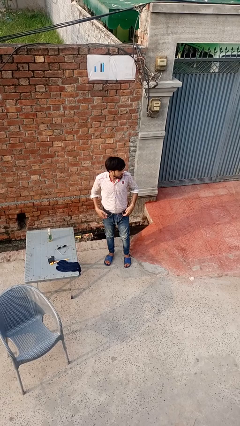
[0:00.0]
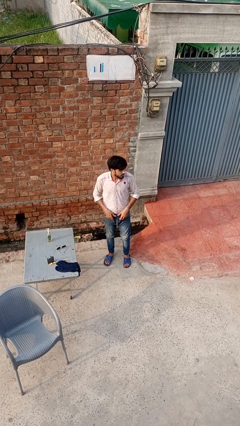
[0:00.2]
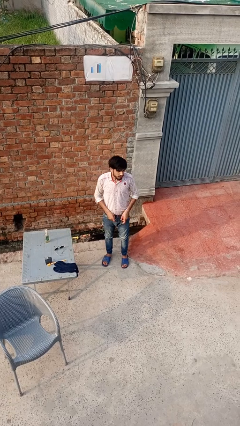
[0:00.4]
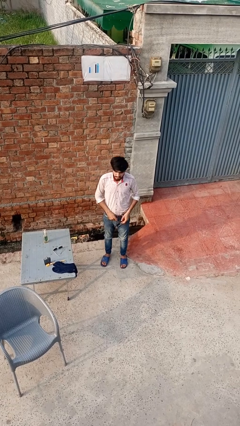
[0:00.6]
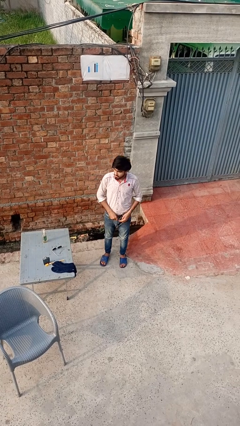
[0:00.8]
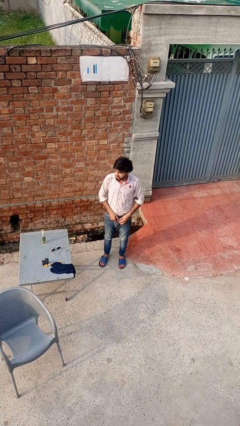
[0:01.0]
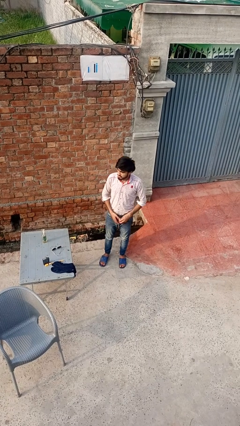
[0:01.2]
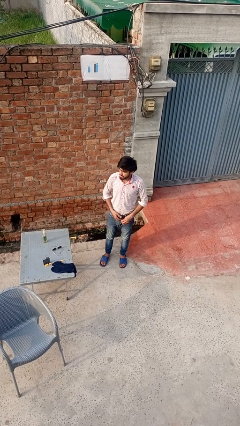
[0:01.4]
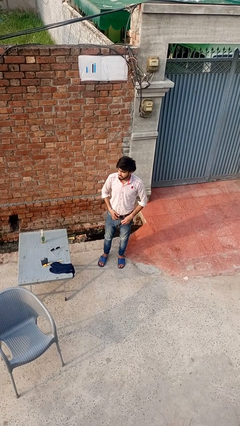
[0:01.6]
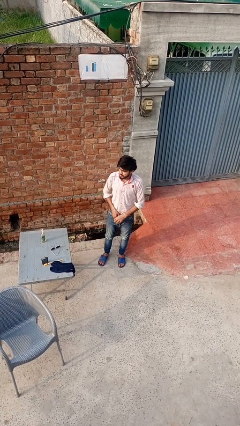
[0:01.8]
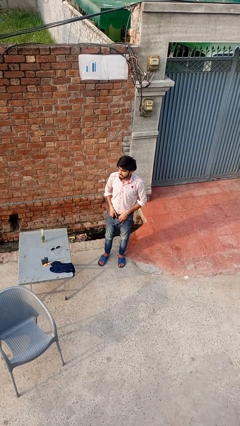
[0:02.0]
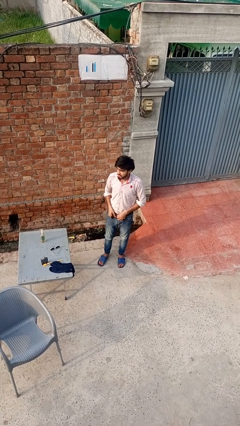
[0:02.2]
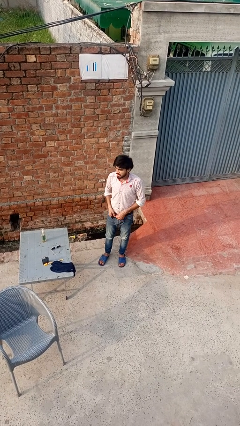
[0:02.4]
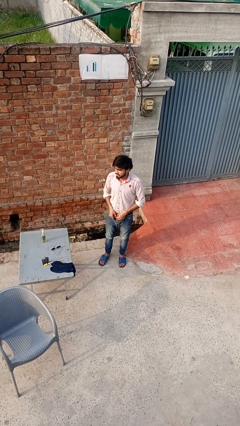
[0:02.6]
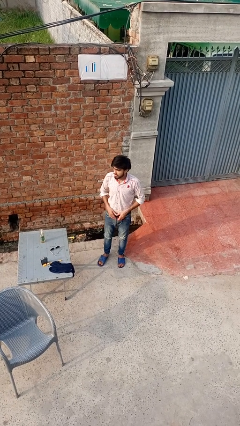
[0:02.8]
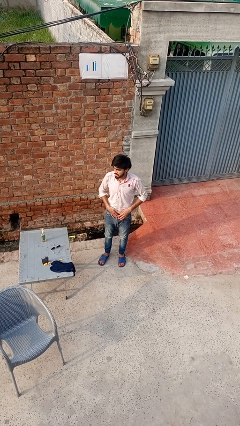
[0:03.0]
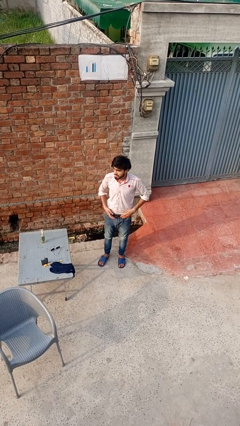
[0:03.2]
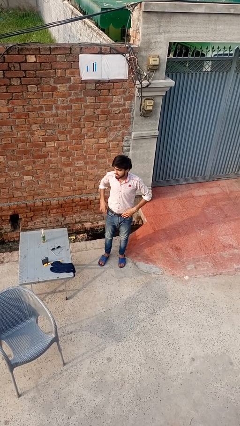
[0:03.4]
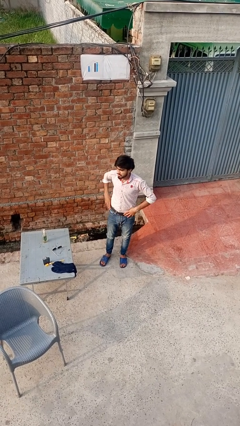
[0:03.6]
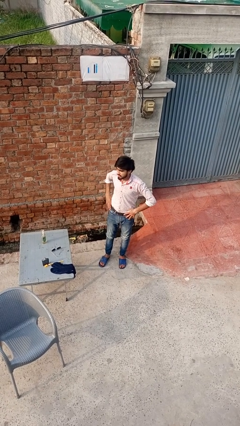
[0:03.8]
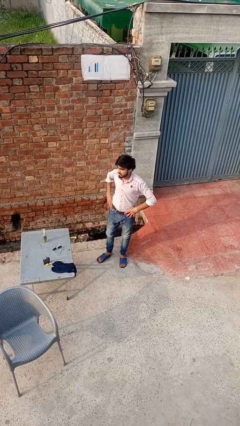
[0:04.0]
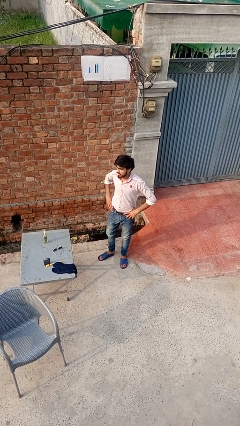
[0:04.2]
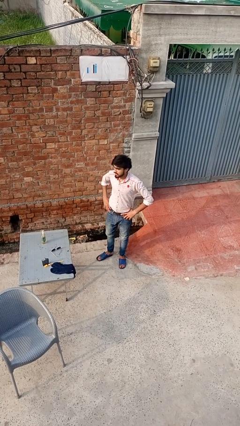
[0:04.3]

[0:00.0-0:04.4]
person puts on belt

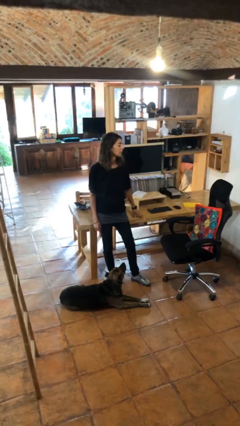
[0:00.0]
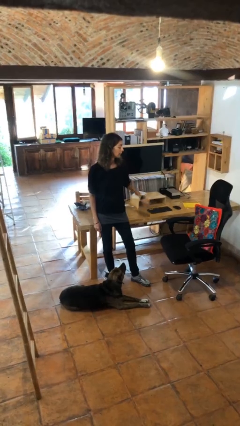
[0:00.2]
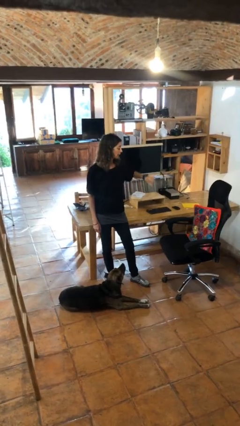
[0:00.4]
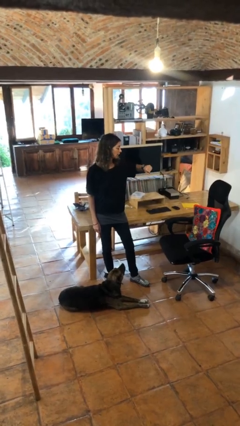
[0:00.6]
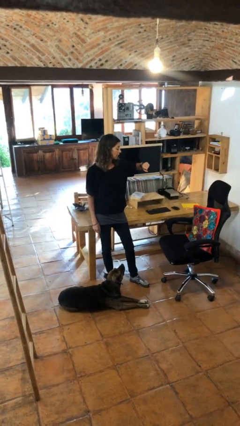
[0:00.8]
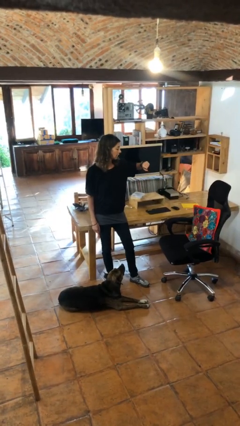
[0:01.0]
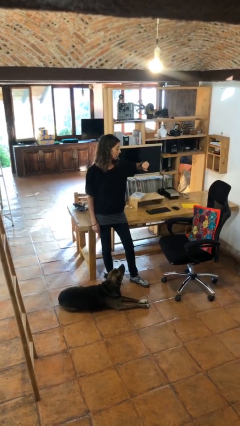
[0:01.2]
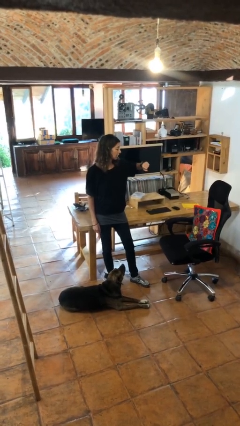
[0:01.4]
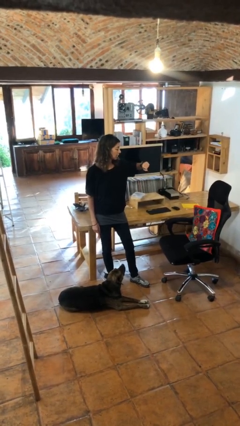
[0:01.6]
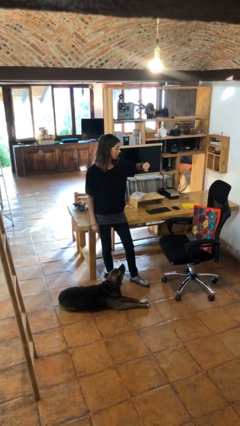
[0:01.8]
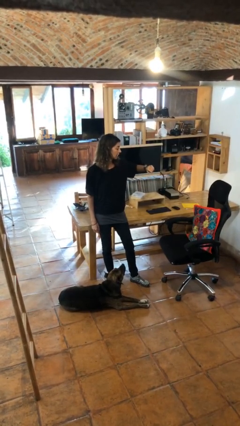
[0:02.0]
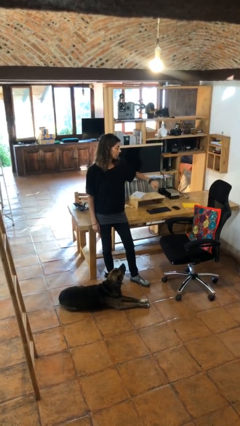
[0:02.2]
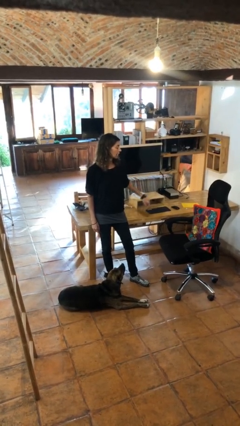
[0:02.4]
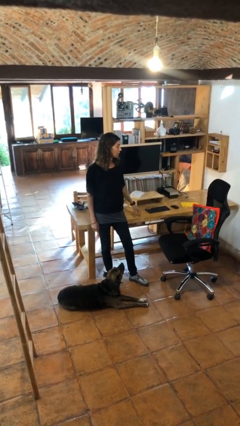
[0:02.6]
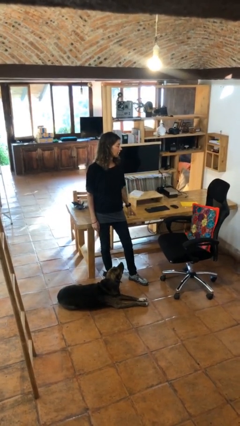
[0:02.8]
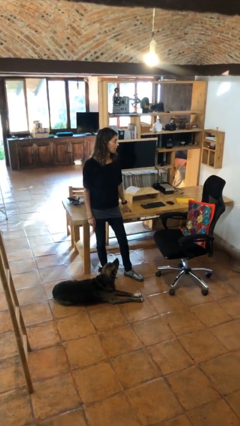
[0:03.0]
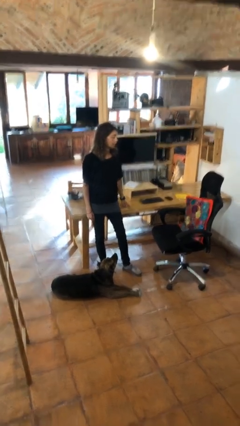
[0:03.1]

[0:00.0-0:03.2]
person looks at wristwatch

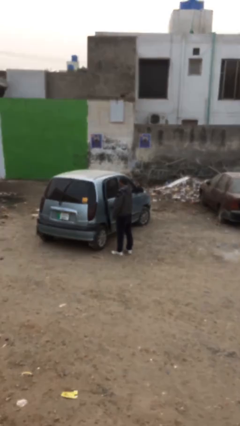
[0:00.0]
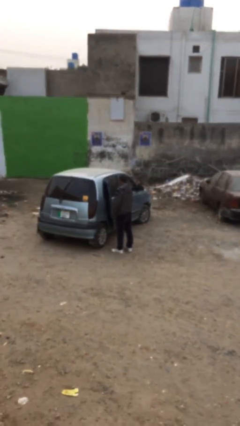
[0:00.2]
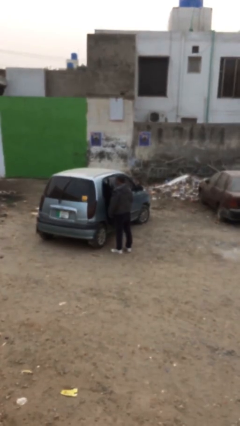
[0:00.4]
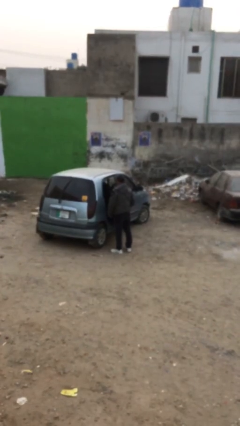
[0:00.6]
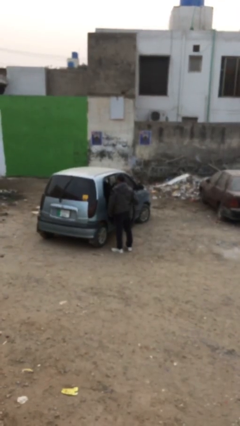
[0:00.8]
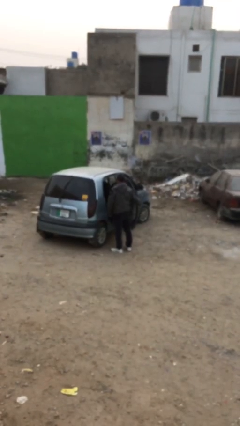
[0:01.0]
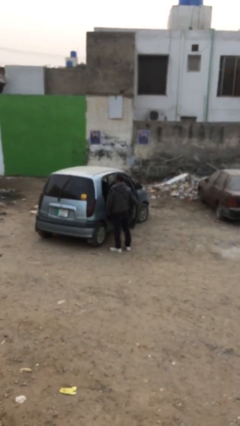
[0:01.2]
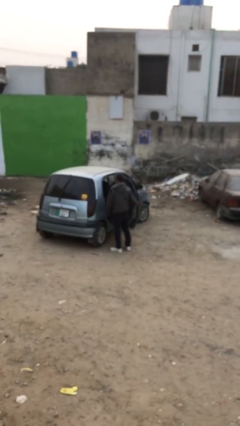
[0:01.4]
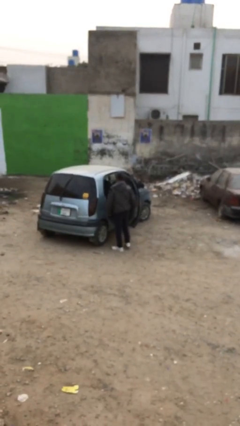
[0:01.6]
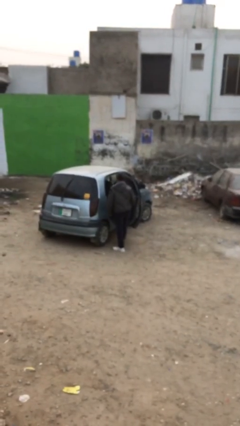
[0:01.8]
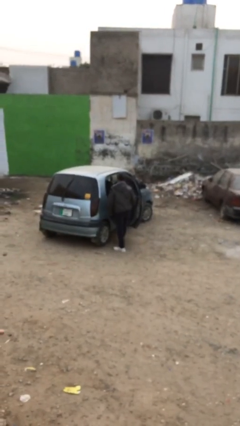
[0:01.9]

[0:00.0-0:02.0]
person opens car door

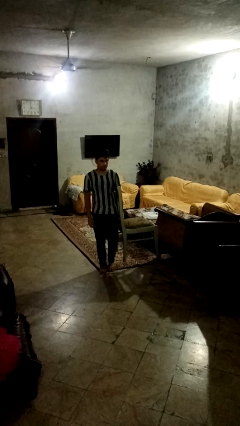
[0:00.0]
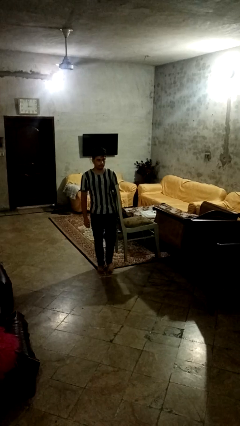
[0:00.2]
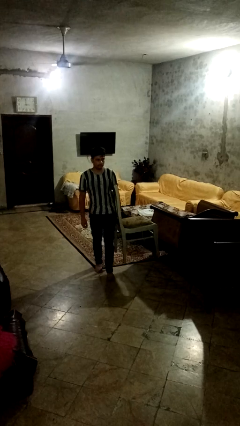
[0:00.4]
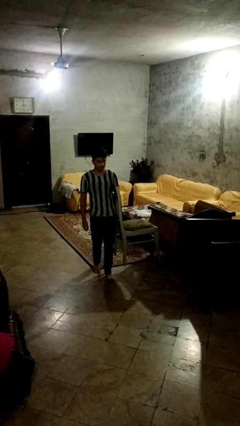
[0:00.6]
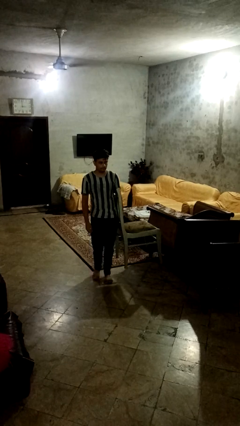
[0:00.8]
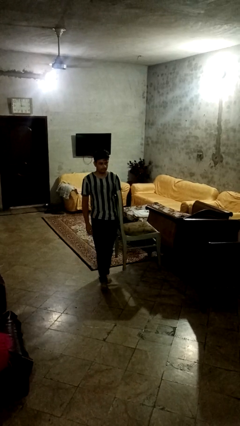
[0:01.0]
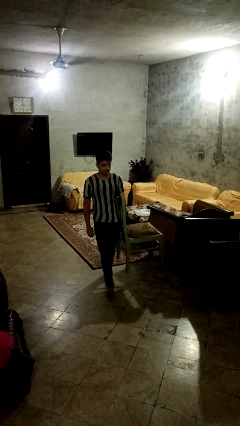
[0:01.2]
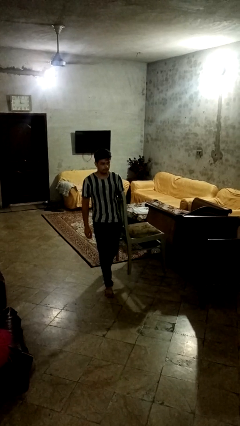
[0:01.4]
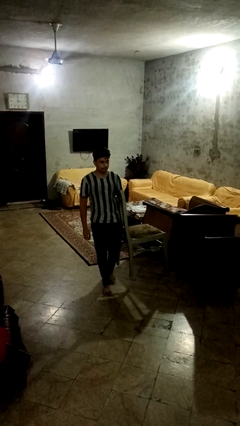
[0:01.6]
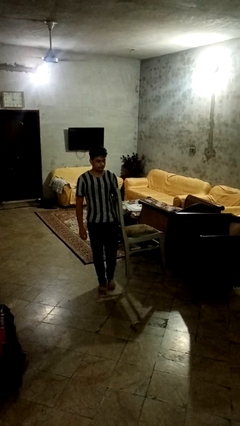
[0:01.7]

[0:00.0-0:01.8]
person carries furniture

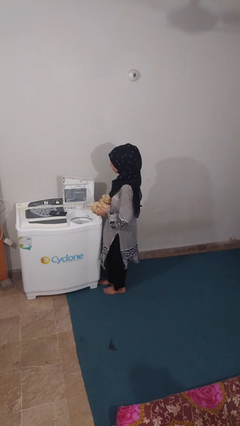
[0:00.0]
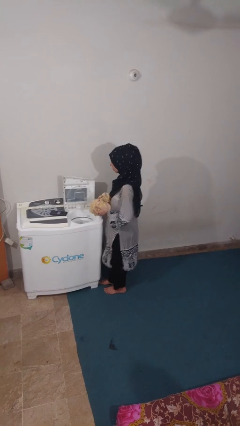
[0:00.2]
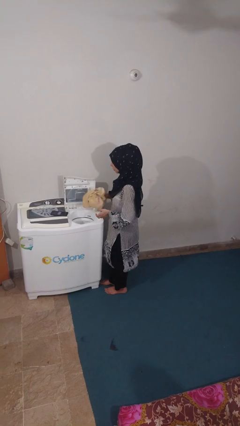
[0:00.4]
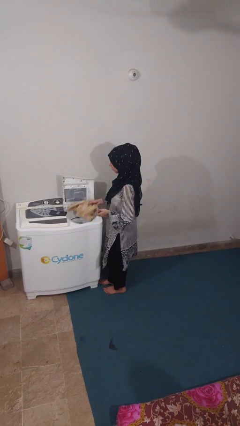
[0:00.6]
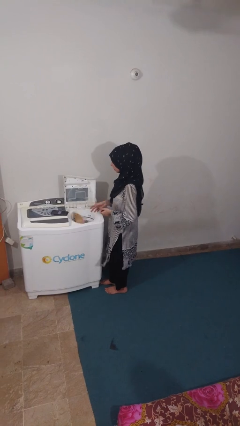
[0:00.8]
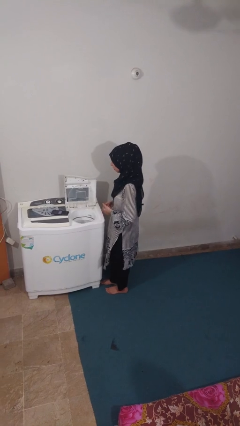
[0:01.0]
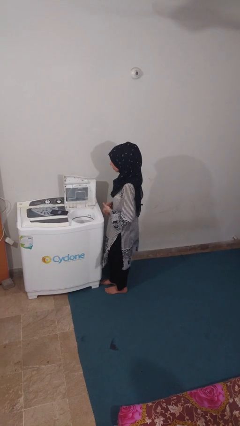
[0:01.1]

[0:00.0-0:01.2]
person loads dryer

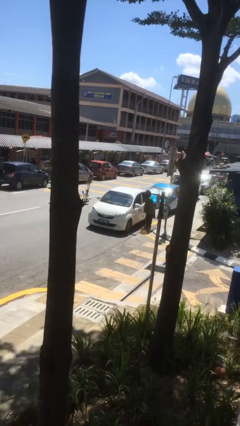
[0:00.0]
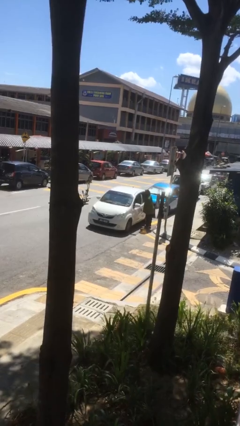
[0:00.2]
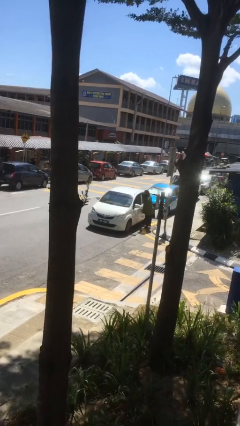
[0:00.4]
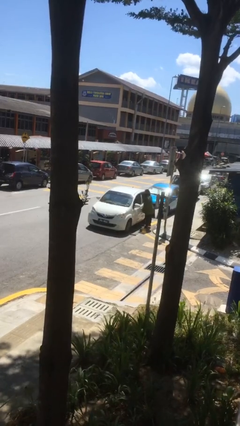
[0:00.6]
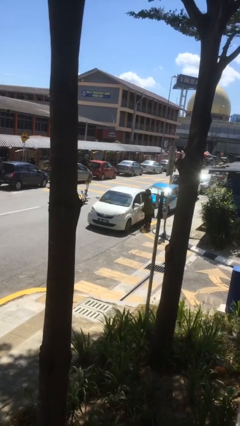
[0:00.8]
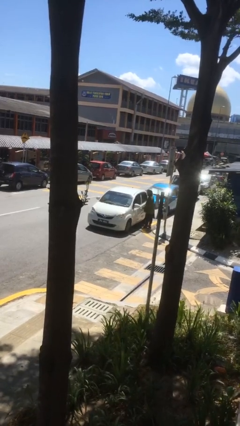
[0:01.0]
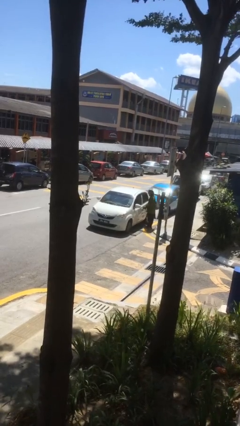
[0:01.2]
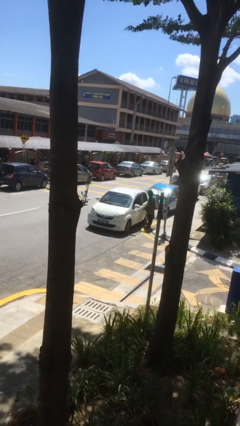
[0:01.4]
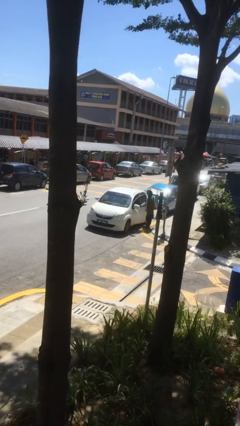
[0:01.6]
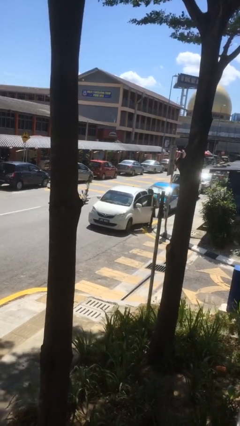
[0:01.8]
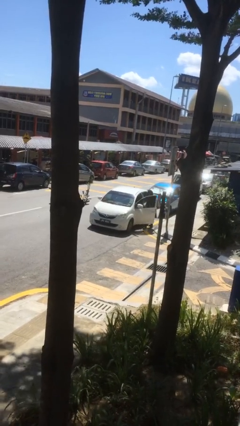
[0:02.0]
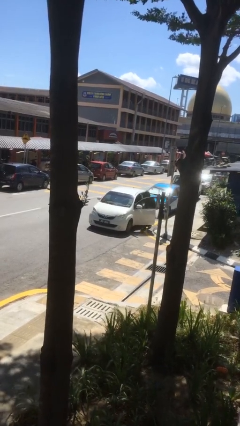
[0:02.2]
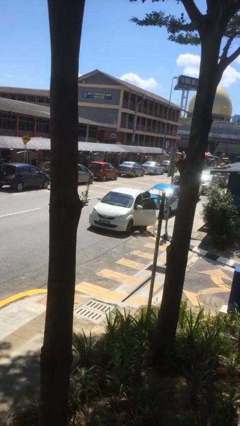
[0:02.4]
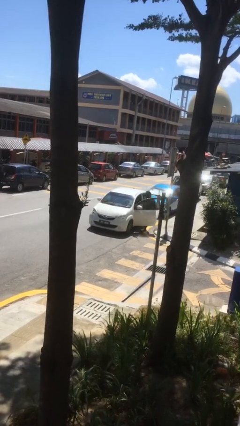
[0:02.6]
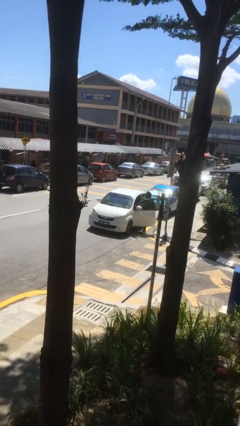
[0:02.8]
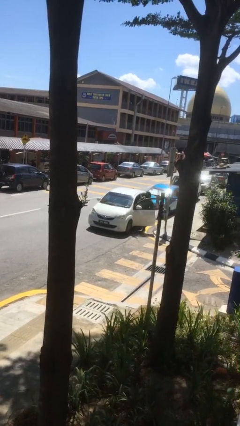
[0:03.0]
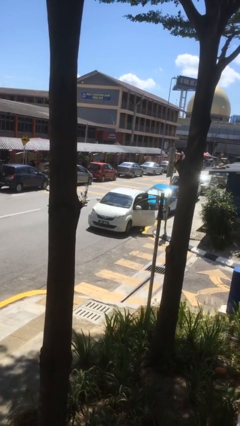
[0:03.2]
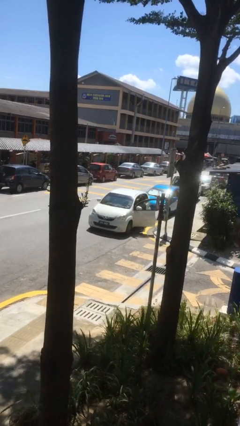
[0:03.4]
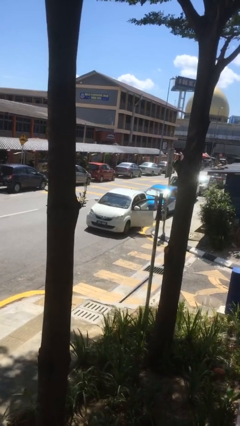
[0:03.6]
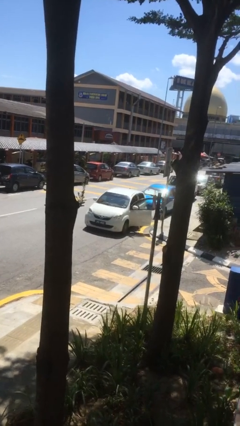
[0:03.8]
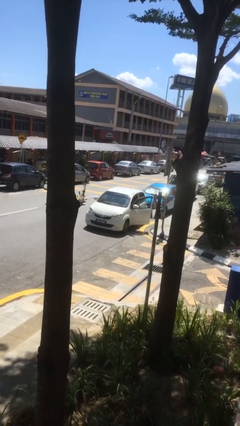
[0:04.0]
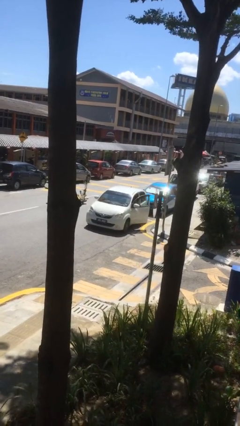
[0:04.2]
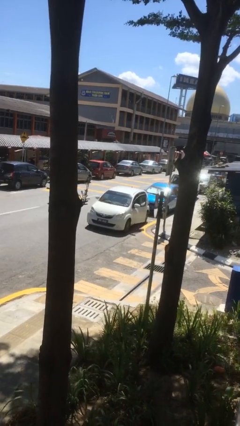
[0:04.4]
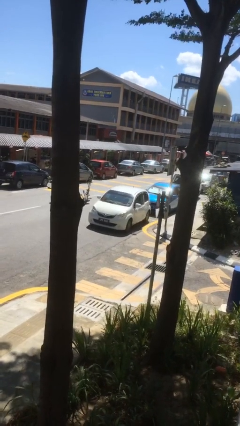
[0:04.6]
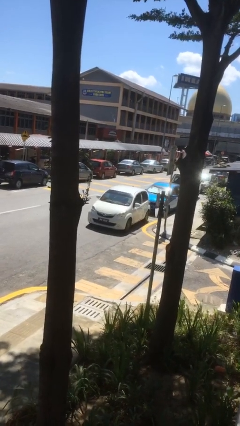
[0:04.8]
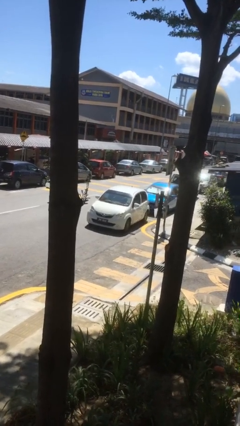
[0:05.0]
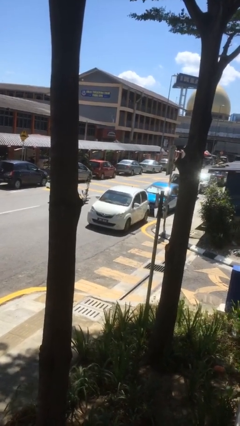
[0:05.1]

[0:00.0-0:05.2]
car picks up person
